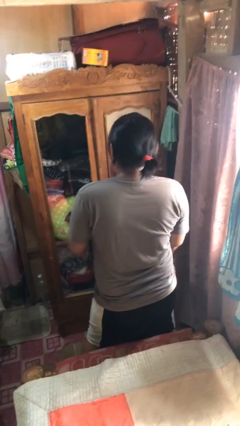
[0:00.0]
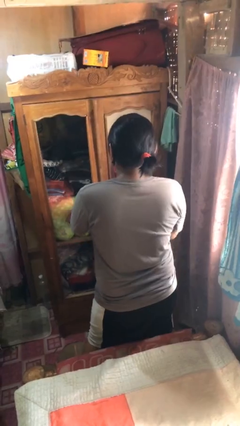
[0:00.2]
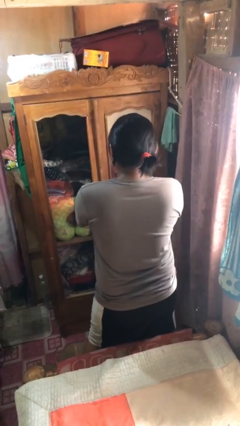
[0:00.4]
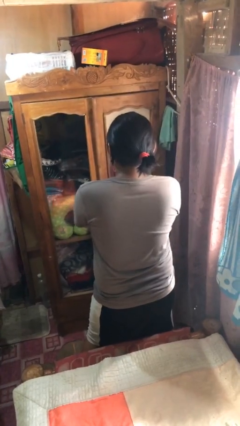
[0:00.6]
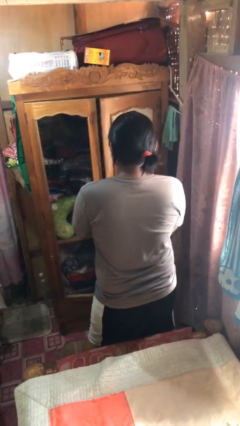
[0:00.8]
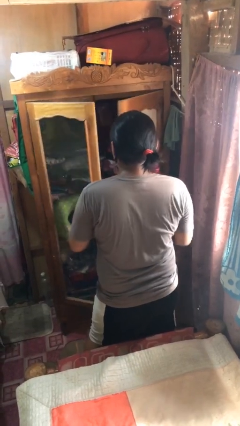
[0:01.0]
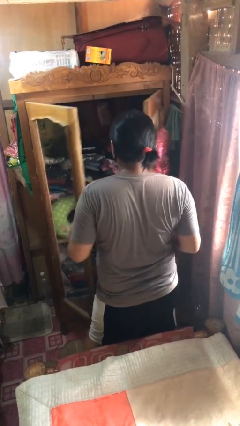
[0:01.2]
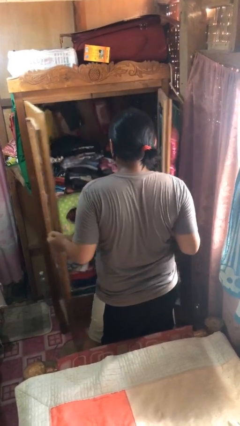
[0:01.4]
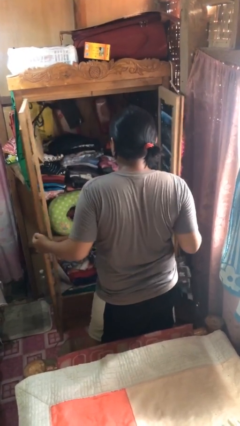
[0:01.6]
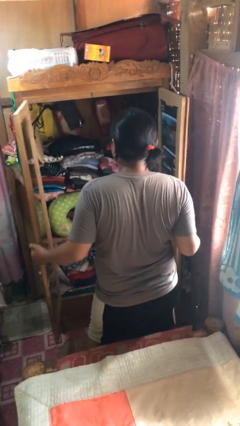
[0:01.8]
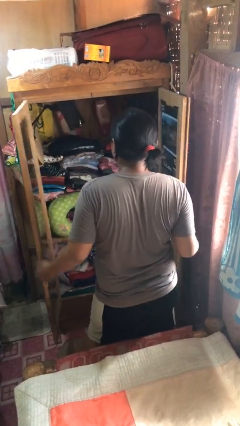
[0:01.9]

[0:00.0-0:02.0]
person opens closet door

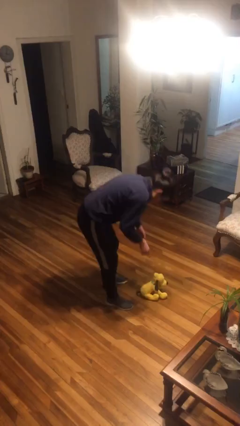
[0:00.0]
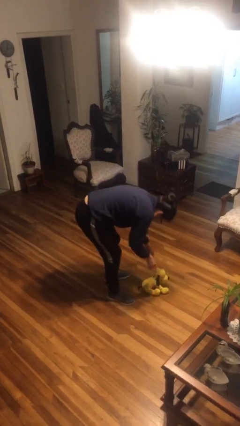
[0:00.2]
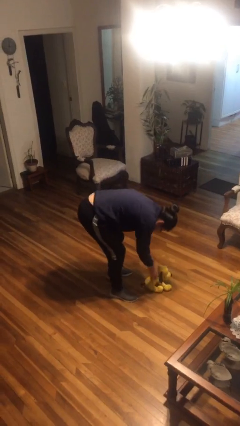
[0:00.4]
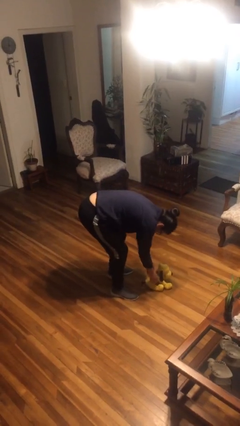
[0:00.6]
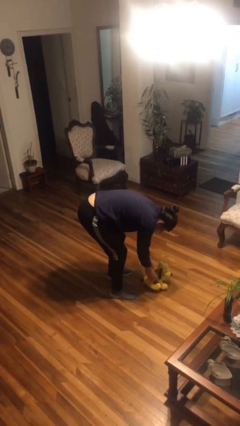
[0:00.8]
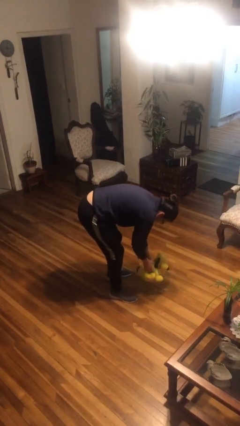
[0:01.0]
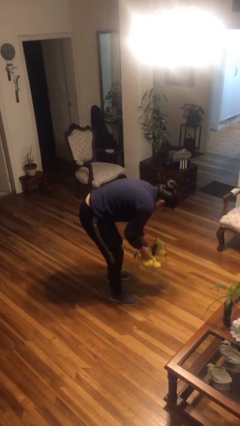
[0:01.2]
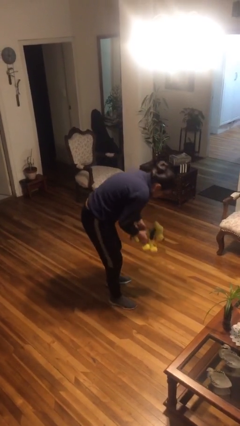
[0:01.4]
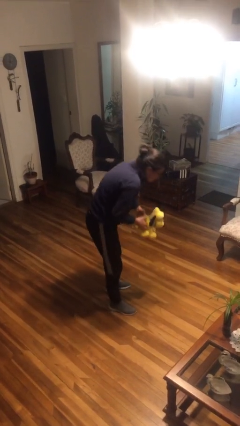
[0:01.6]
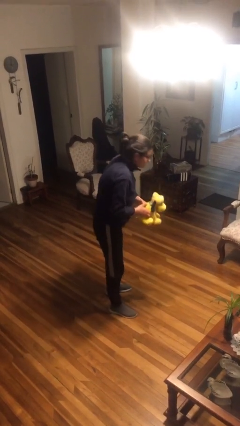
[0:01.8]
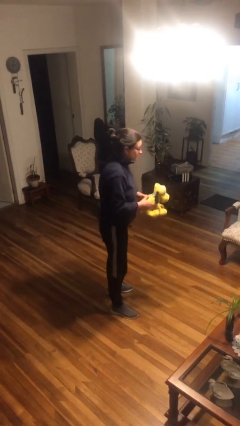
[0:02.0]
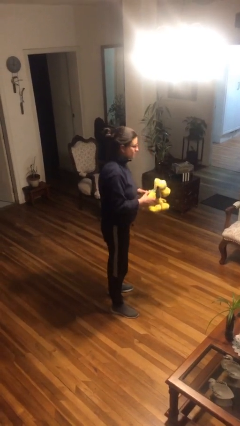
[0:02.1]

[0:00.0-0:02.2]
person picks up object from floor

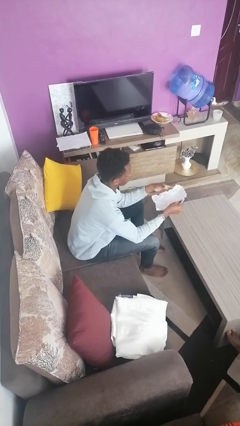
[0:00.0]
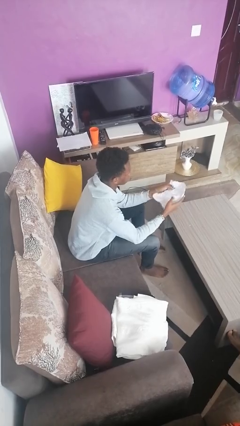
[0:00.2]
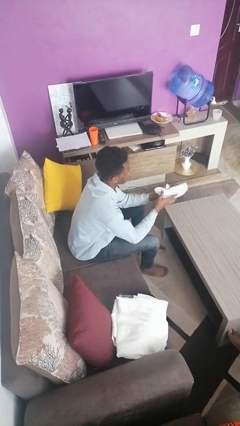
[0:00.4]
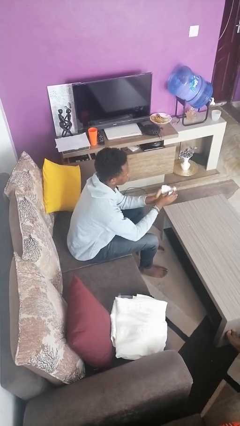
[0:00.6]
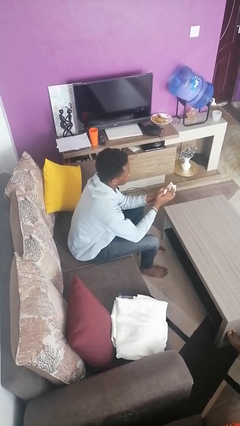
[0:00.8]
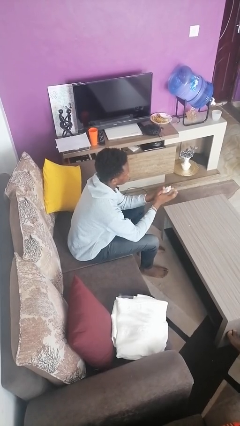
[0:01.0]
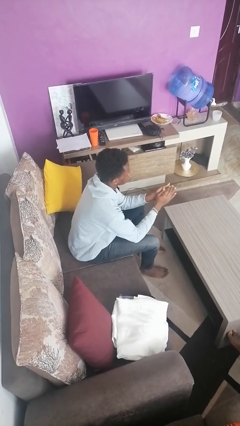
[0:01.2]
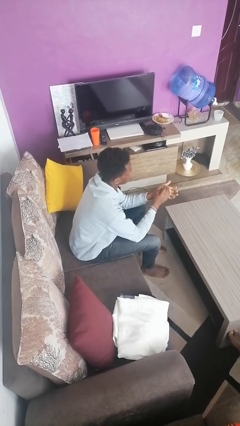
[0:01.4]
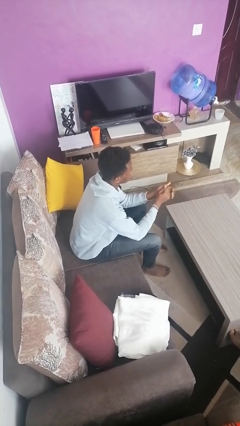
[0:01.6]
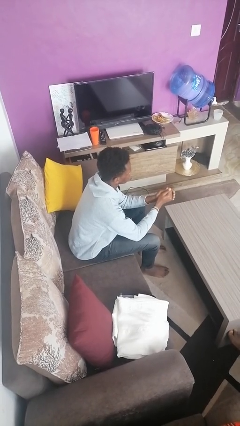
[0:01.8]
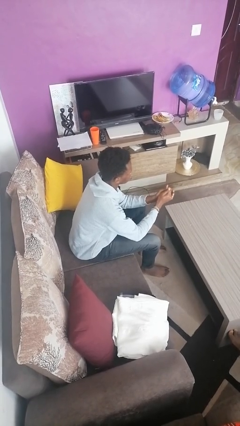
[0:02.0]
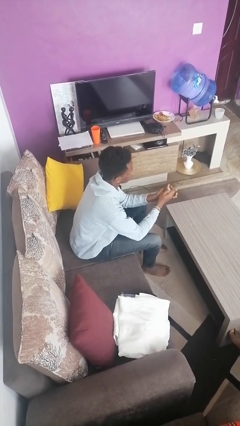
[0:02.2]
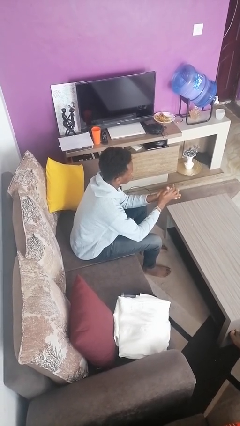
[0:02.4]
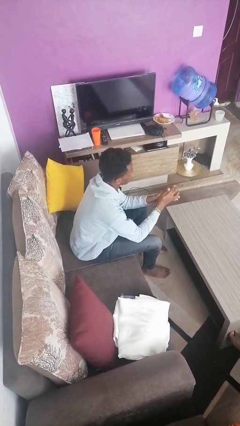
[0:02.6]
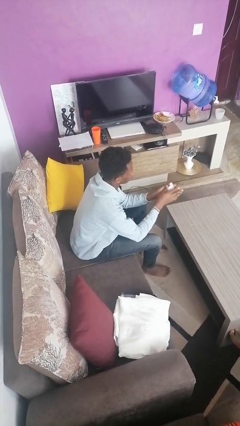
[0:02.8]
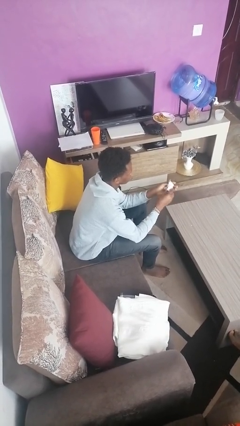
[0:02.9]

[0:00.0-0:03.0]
person crumples paper

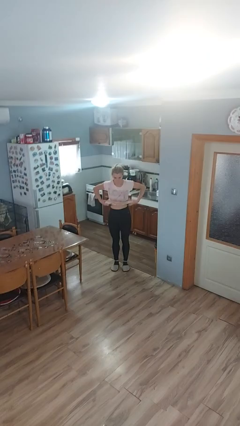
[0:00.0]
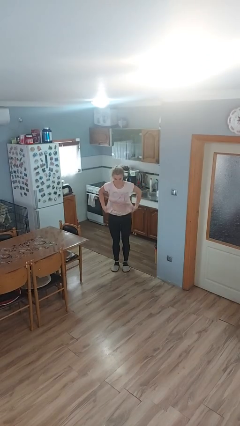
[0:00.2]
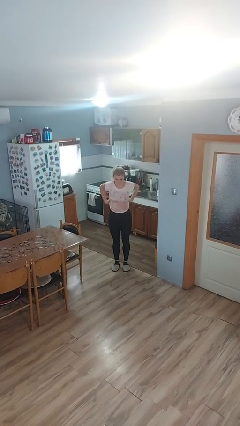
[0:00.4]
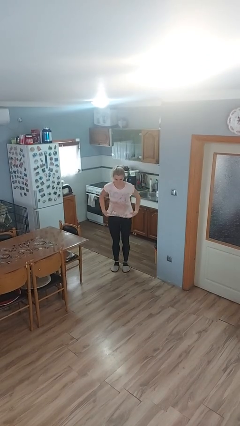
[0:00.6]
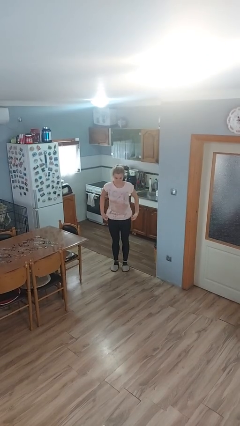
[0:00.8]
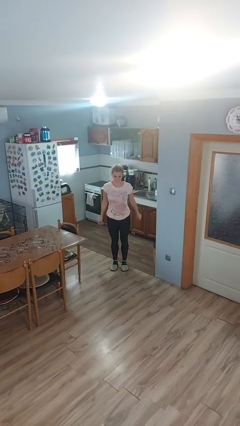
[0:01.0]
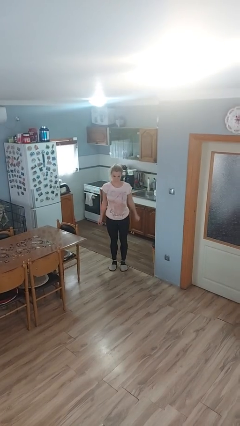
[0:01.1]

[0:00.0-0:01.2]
person untucks shirt

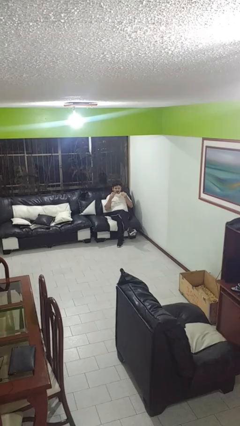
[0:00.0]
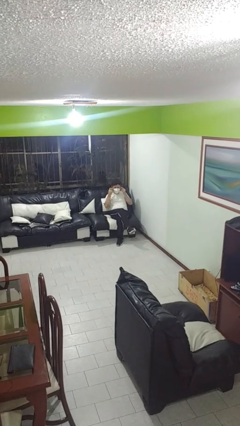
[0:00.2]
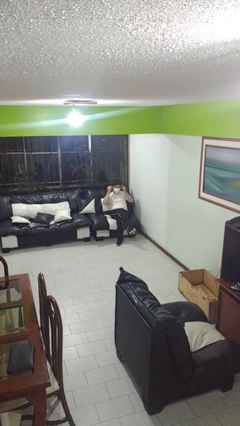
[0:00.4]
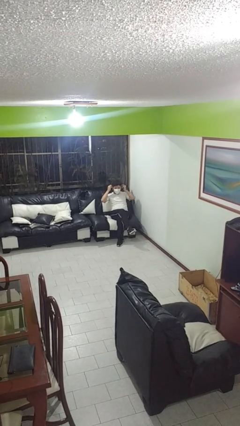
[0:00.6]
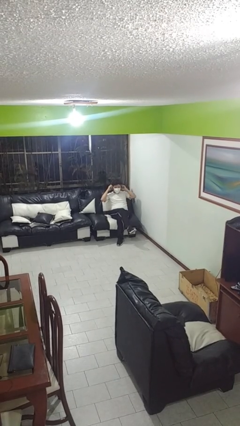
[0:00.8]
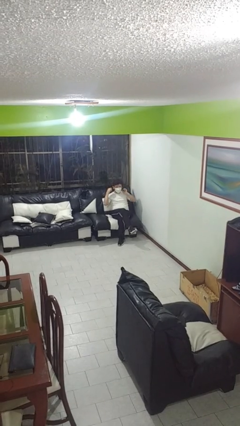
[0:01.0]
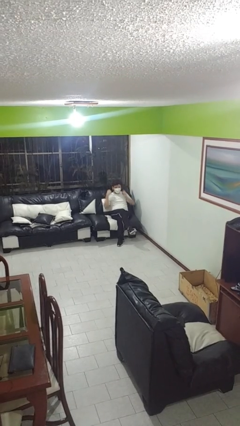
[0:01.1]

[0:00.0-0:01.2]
person puts on facemask

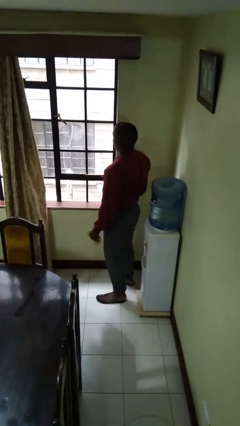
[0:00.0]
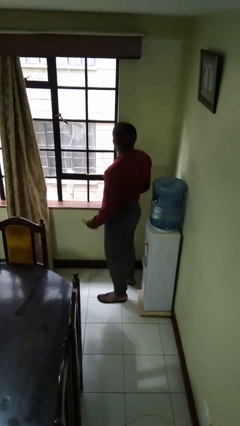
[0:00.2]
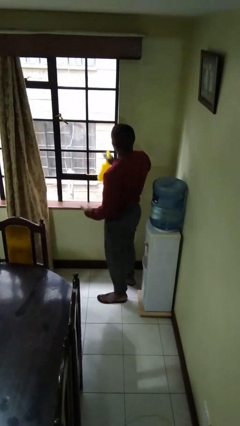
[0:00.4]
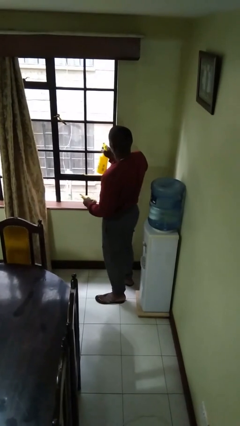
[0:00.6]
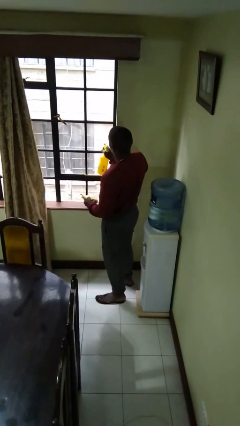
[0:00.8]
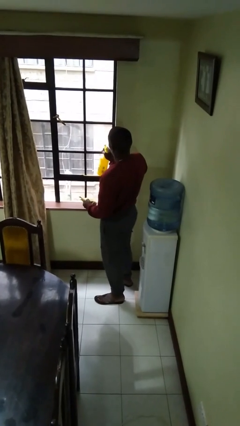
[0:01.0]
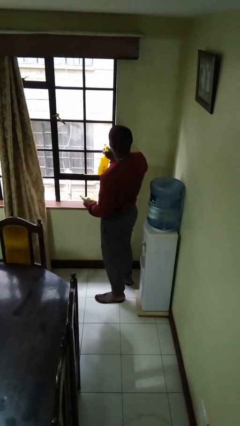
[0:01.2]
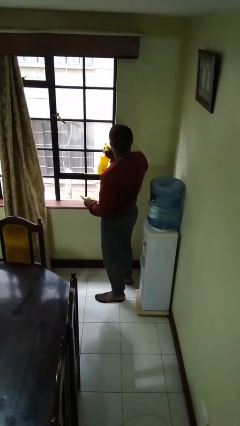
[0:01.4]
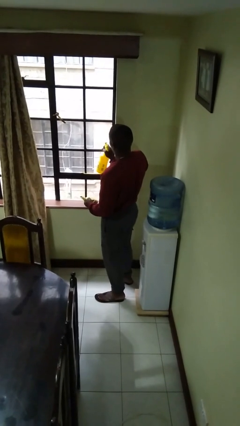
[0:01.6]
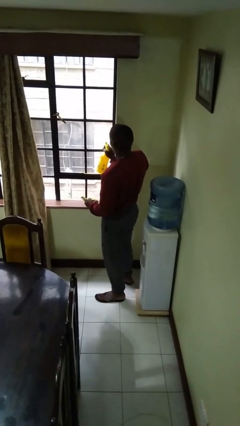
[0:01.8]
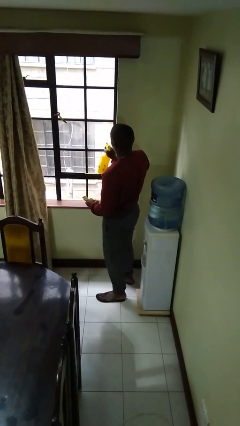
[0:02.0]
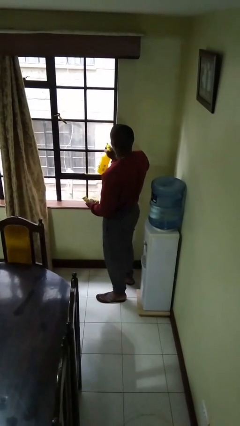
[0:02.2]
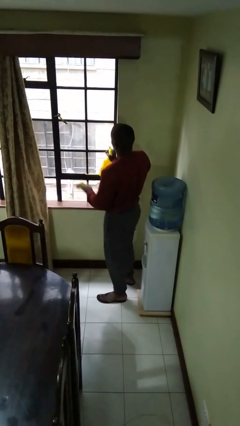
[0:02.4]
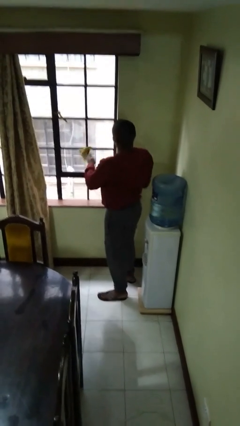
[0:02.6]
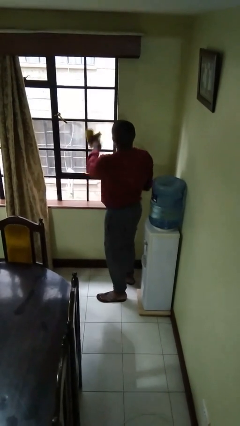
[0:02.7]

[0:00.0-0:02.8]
person sprays from bottle

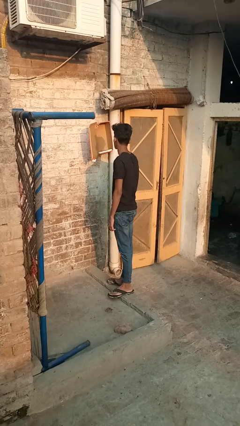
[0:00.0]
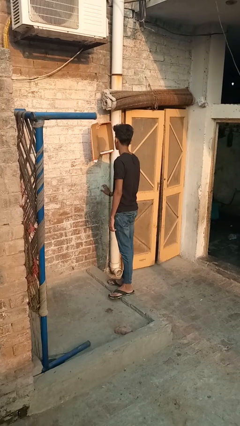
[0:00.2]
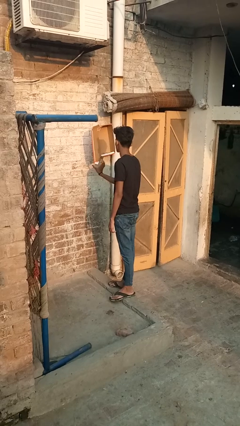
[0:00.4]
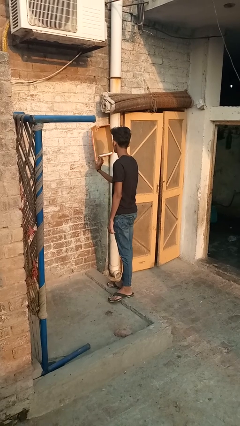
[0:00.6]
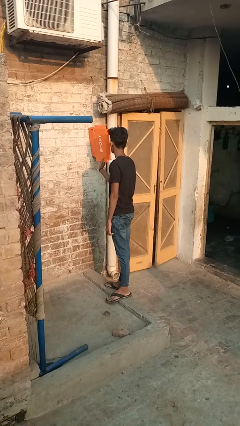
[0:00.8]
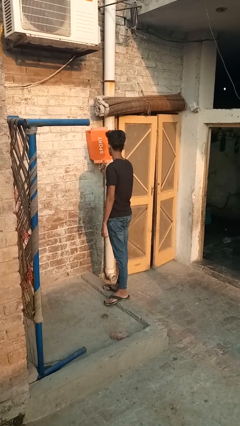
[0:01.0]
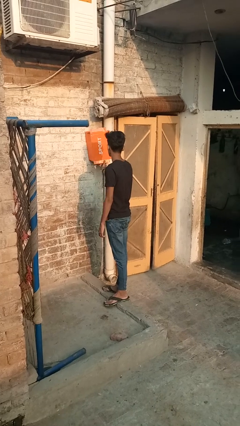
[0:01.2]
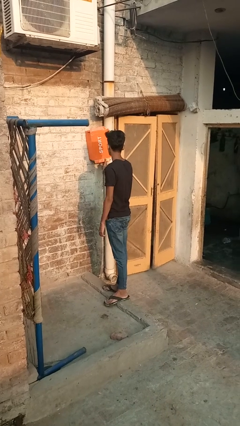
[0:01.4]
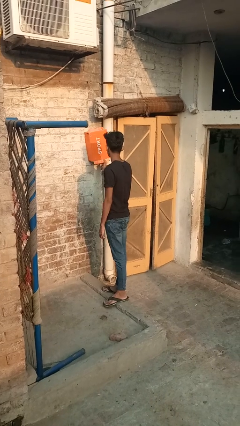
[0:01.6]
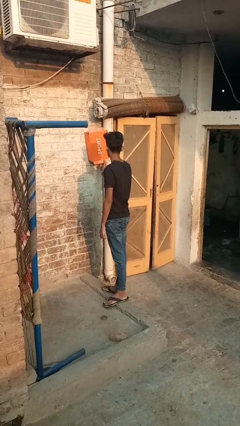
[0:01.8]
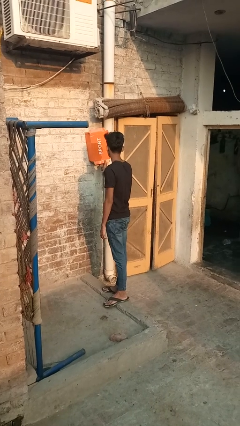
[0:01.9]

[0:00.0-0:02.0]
person opens mailbox

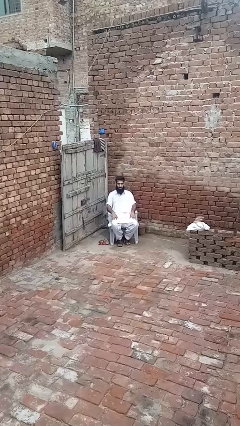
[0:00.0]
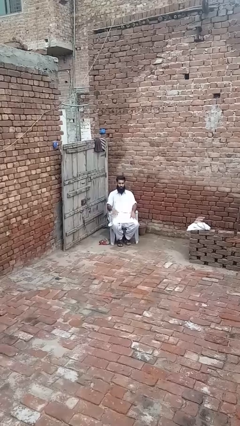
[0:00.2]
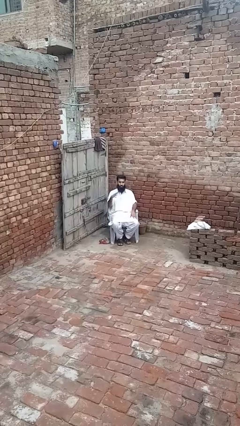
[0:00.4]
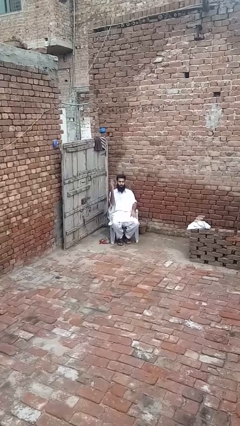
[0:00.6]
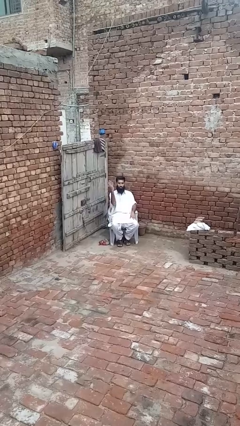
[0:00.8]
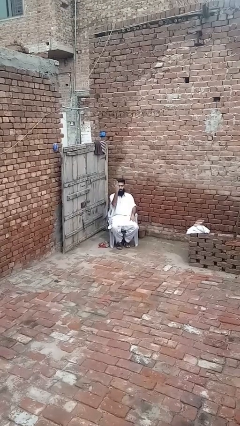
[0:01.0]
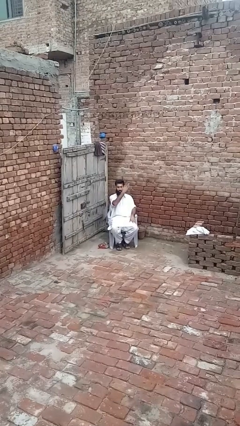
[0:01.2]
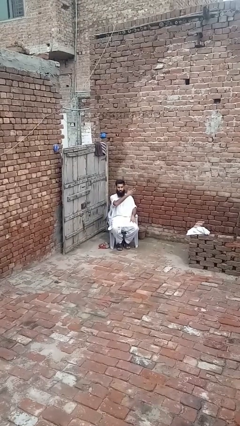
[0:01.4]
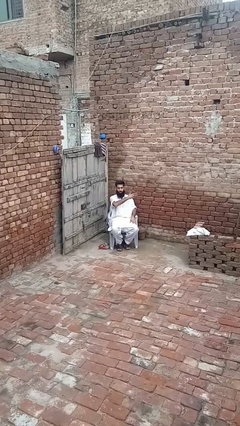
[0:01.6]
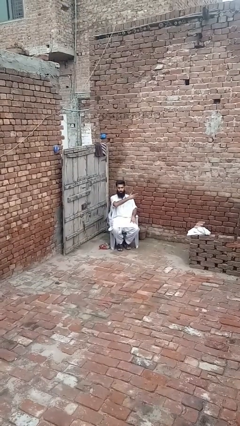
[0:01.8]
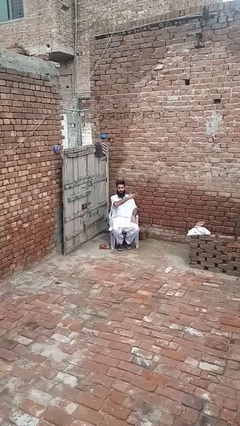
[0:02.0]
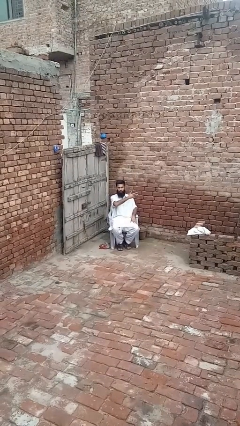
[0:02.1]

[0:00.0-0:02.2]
person gestures swipe left

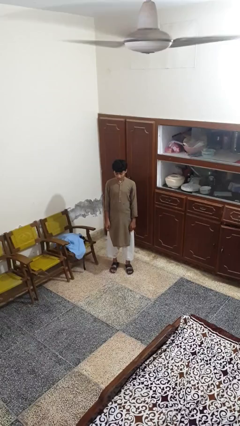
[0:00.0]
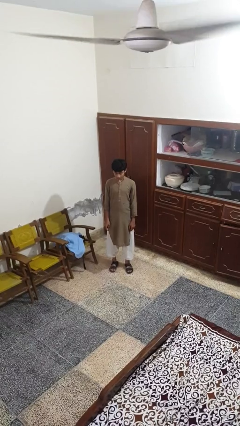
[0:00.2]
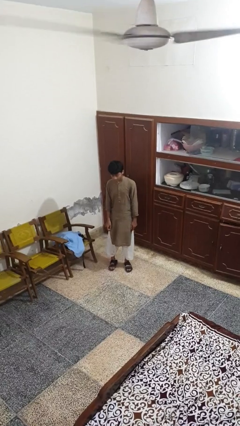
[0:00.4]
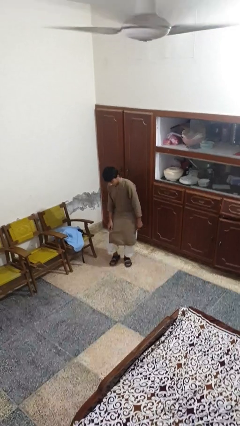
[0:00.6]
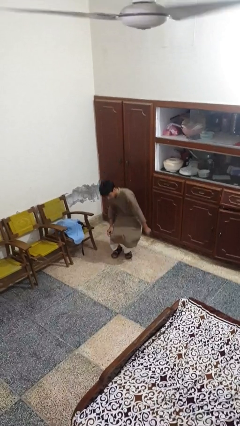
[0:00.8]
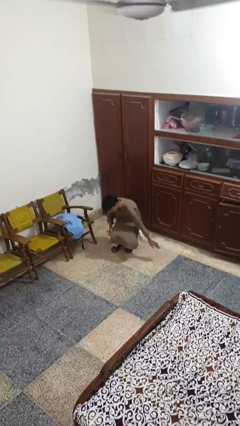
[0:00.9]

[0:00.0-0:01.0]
person falls while standing
